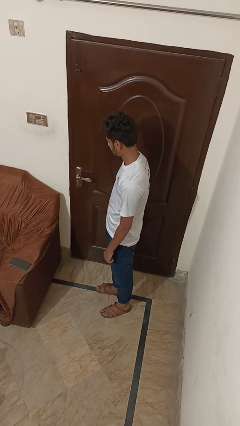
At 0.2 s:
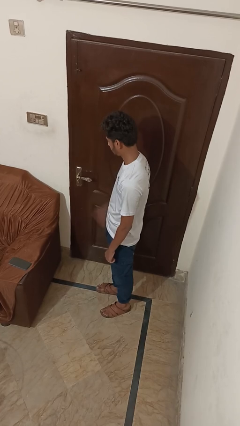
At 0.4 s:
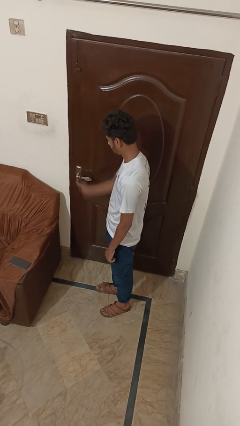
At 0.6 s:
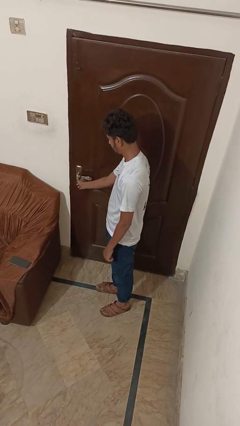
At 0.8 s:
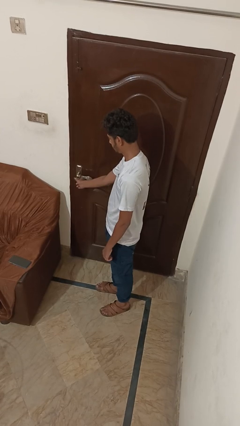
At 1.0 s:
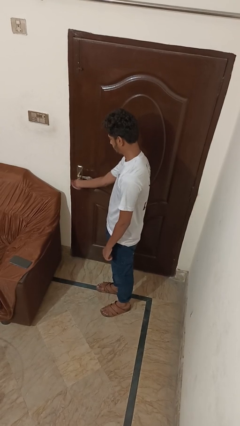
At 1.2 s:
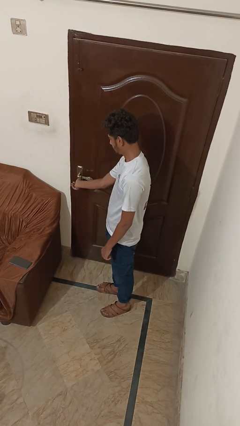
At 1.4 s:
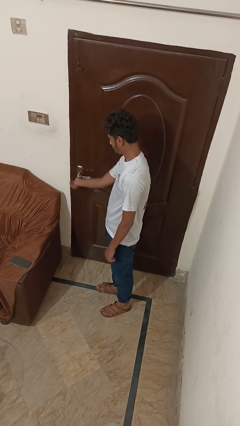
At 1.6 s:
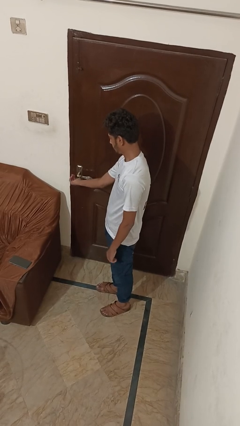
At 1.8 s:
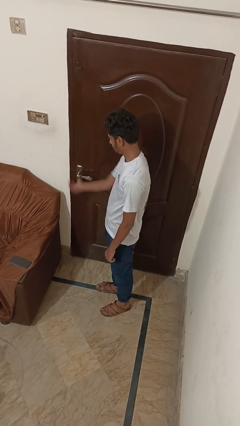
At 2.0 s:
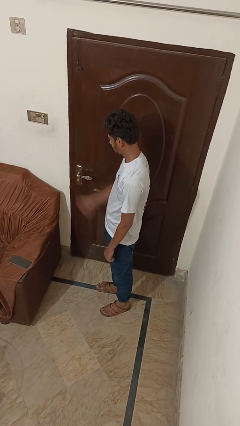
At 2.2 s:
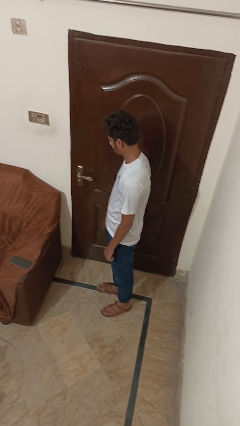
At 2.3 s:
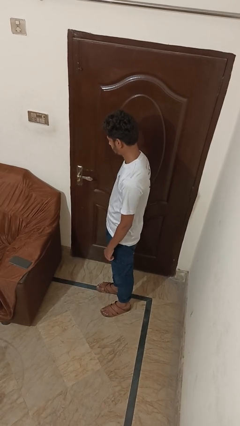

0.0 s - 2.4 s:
person unlocks door with keys

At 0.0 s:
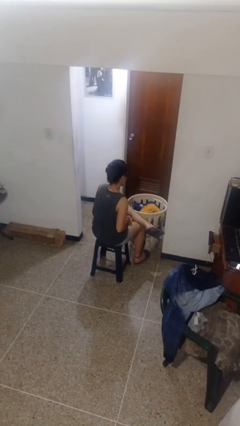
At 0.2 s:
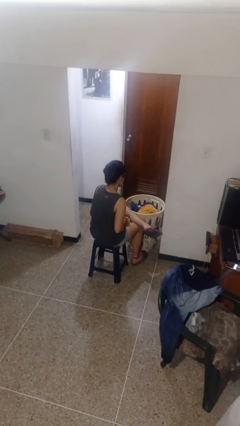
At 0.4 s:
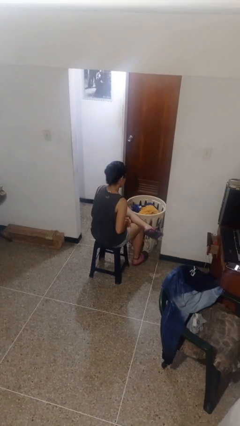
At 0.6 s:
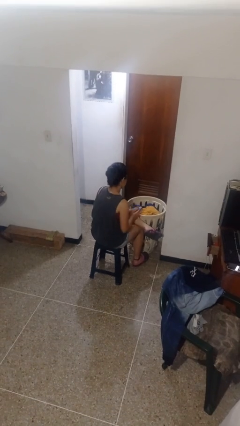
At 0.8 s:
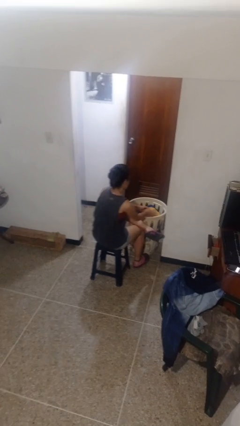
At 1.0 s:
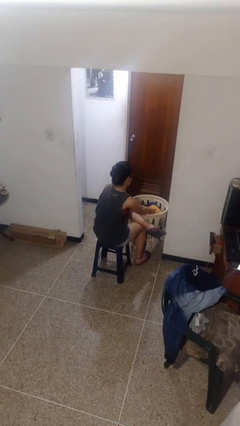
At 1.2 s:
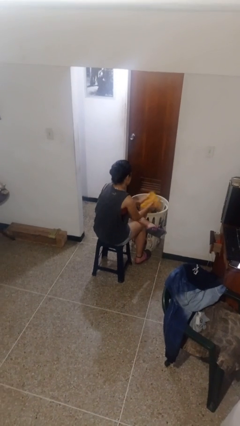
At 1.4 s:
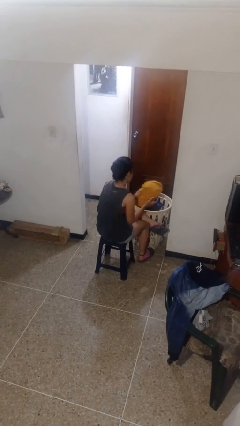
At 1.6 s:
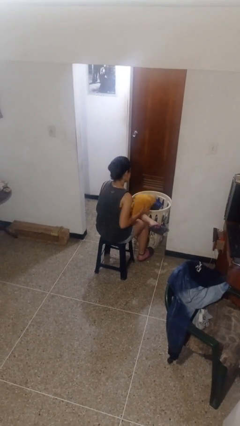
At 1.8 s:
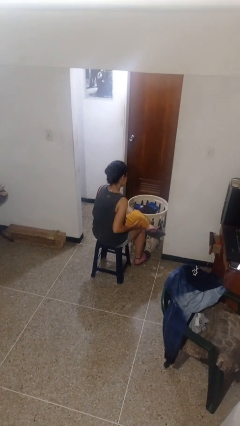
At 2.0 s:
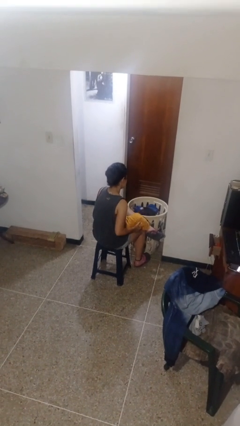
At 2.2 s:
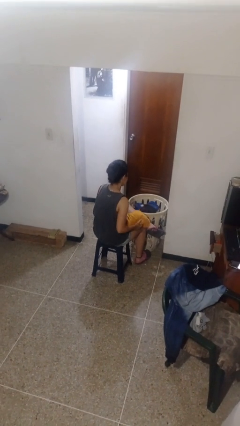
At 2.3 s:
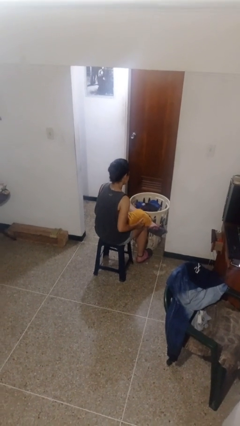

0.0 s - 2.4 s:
person takes object from basket

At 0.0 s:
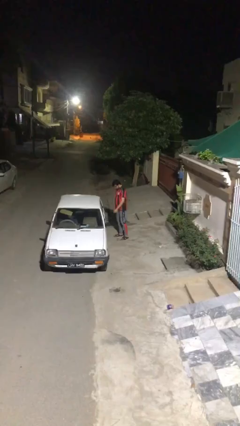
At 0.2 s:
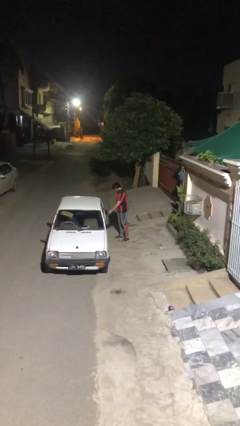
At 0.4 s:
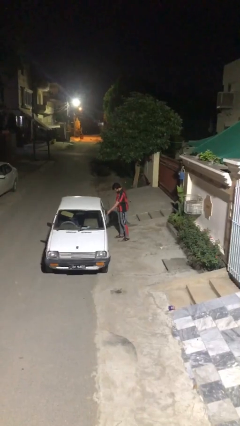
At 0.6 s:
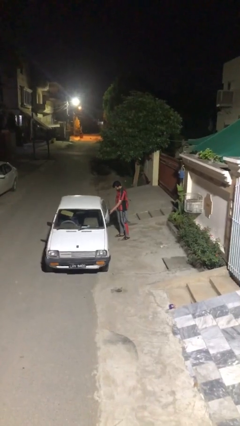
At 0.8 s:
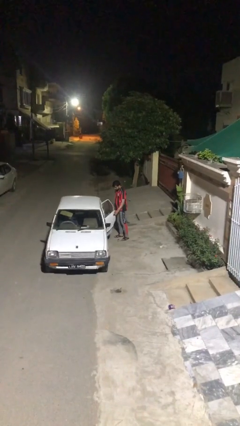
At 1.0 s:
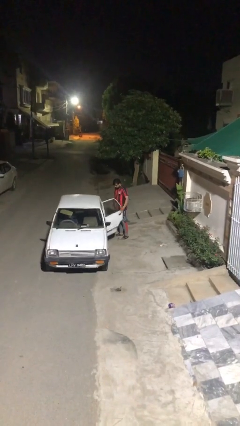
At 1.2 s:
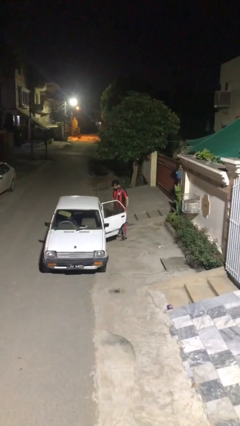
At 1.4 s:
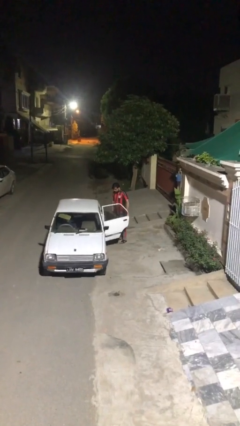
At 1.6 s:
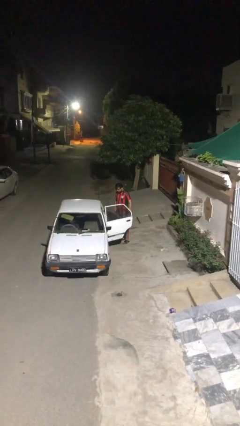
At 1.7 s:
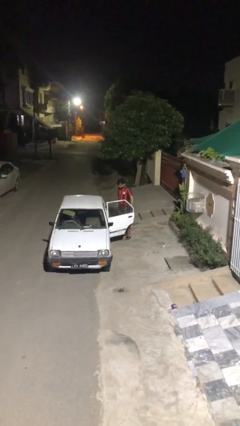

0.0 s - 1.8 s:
person opens car door

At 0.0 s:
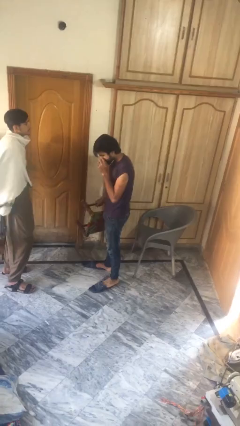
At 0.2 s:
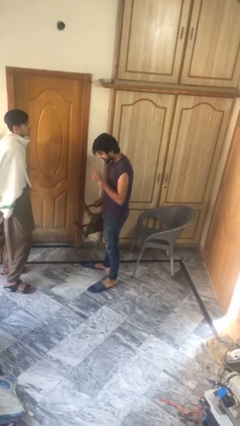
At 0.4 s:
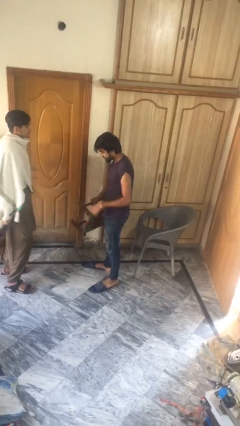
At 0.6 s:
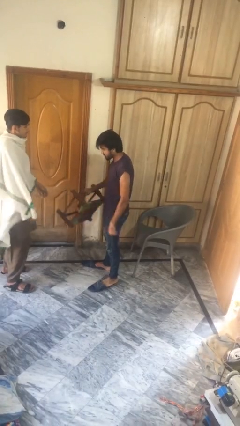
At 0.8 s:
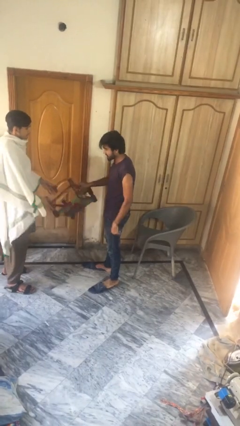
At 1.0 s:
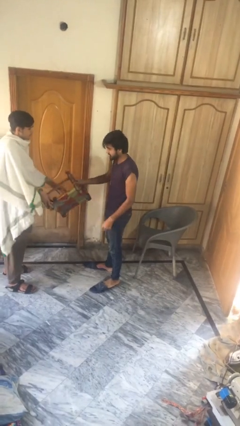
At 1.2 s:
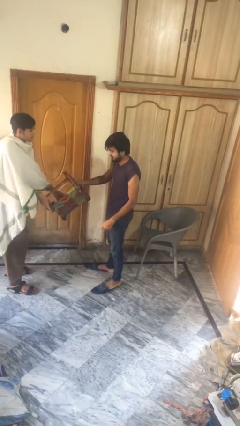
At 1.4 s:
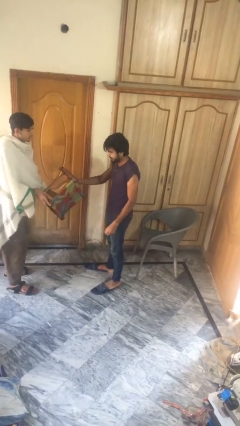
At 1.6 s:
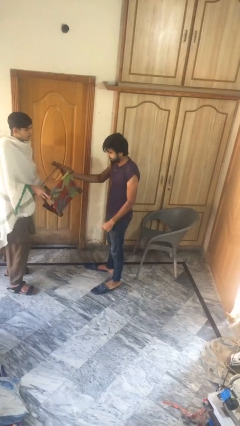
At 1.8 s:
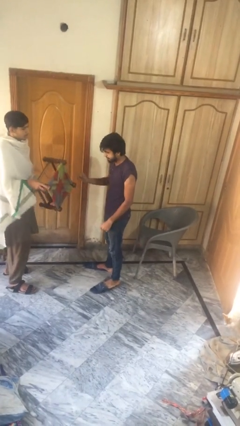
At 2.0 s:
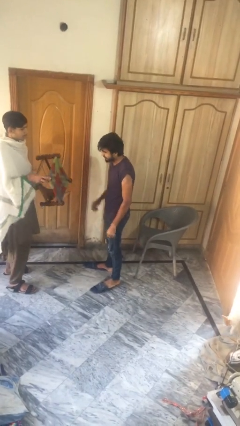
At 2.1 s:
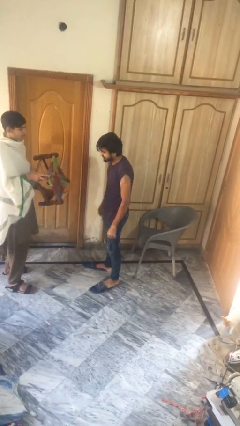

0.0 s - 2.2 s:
person transfers object to person

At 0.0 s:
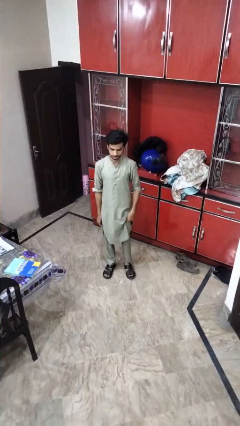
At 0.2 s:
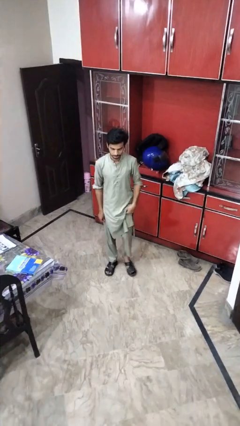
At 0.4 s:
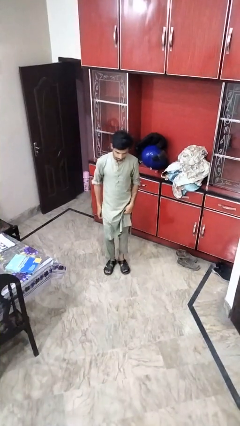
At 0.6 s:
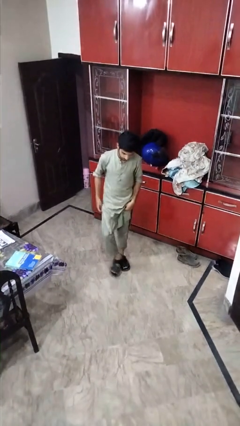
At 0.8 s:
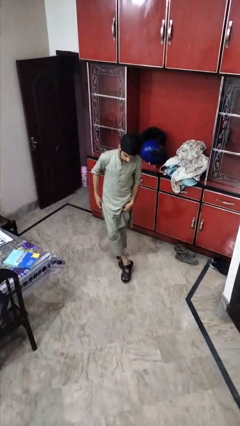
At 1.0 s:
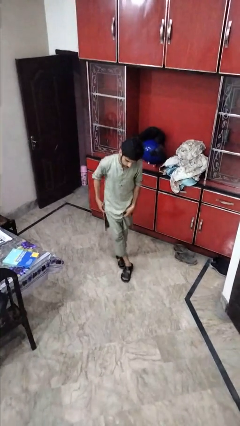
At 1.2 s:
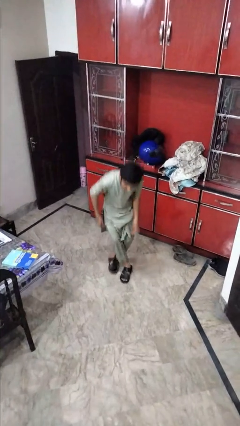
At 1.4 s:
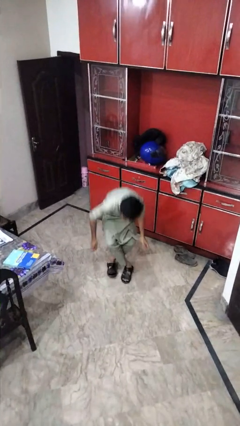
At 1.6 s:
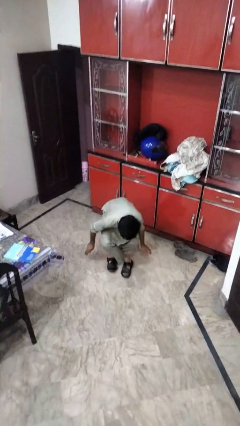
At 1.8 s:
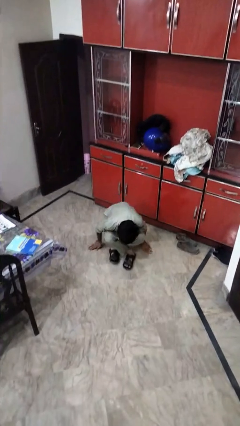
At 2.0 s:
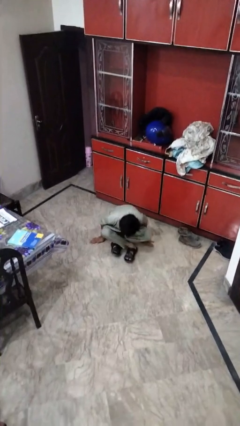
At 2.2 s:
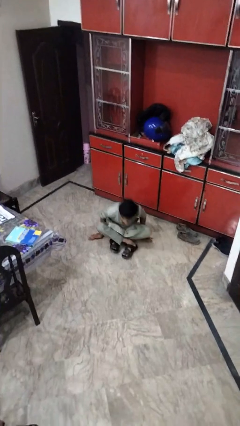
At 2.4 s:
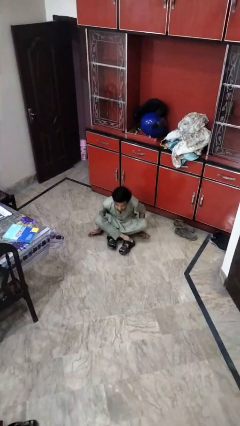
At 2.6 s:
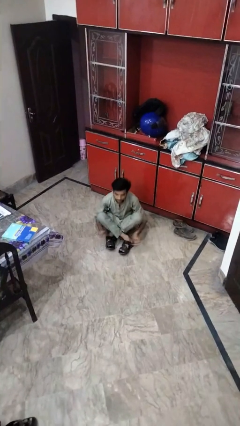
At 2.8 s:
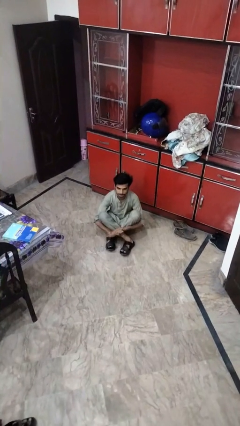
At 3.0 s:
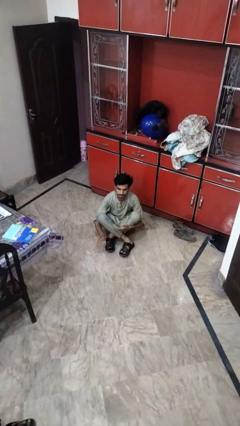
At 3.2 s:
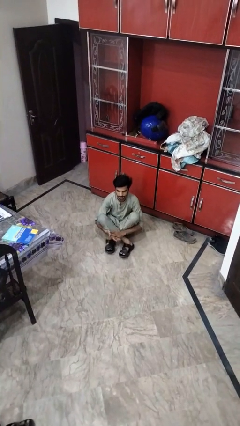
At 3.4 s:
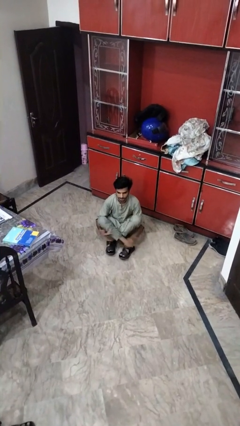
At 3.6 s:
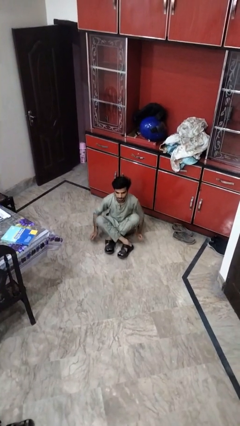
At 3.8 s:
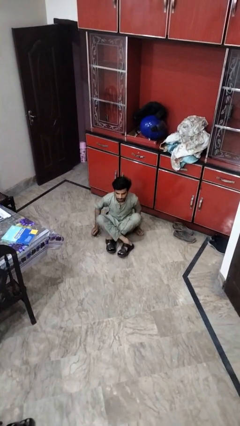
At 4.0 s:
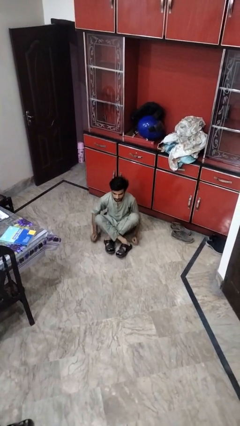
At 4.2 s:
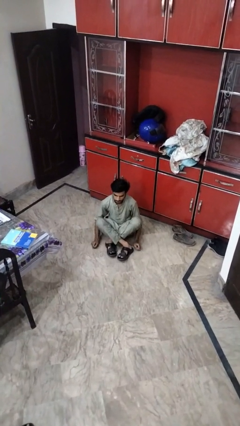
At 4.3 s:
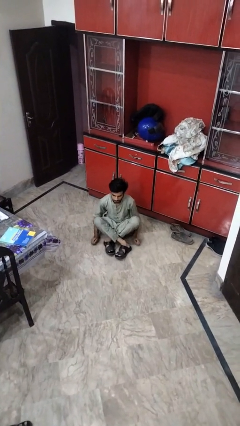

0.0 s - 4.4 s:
person sits crisscross

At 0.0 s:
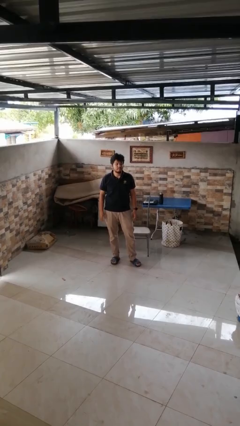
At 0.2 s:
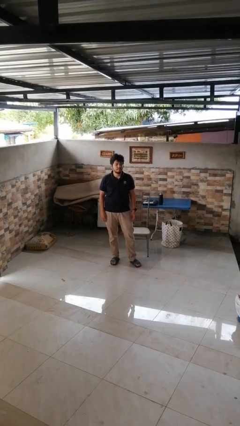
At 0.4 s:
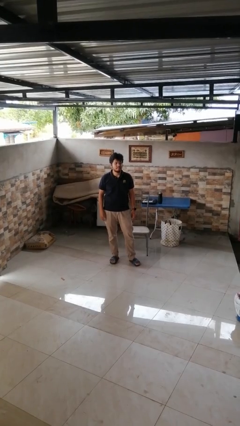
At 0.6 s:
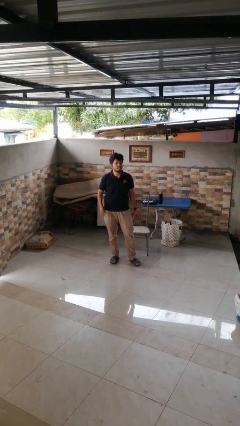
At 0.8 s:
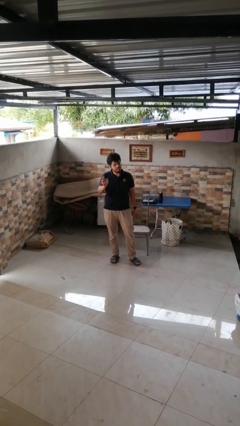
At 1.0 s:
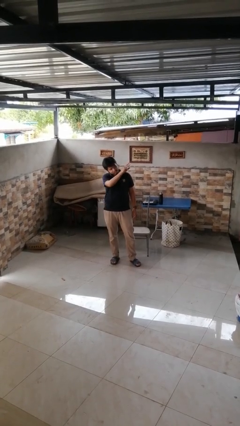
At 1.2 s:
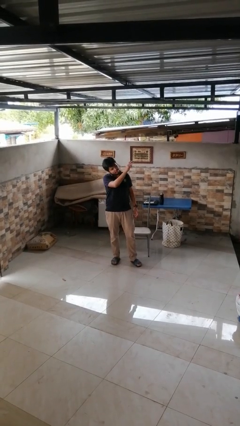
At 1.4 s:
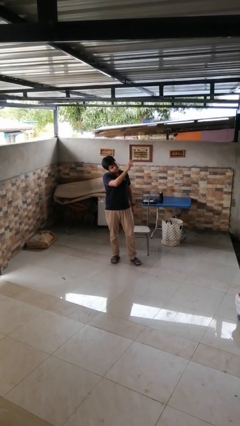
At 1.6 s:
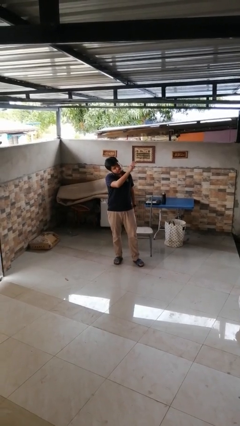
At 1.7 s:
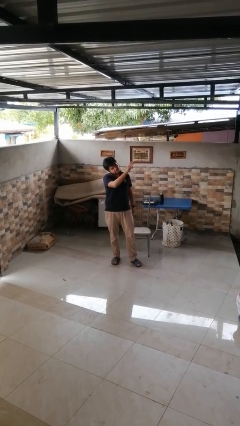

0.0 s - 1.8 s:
person gestures swipe left

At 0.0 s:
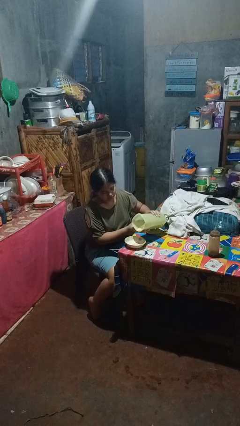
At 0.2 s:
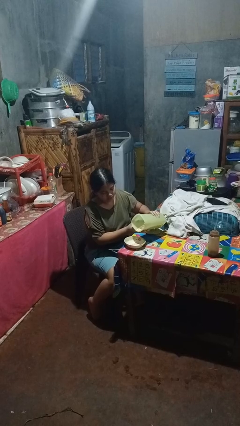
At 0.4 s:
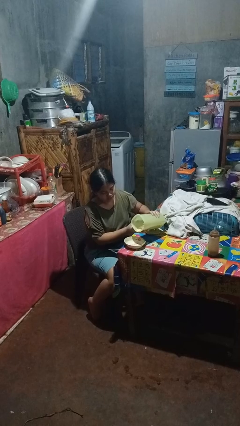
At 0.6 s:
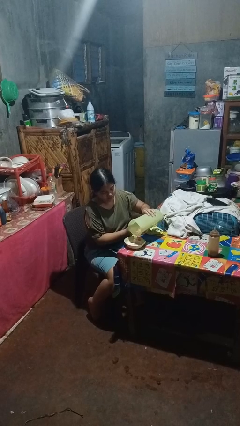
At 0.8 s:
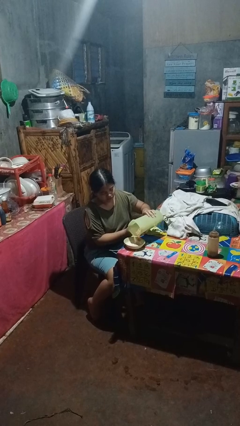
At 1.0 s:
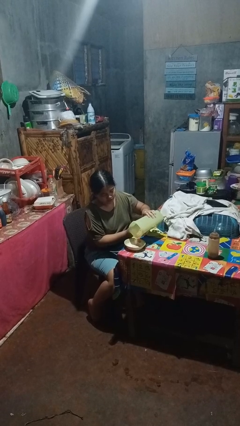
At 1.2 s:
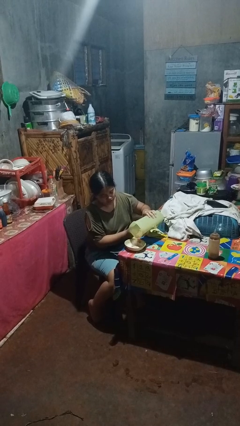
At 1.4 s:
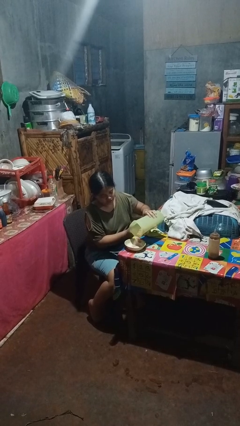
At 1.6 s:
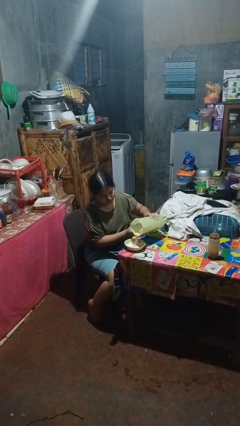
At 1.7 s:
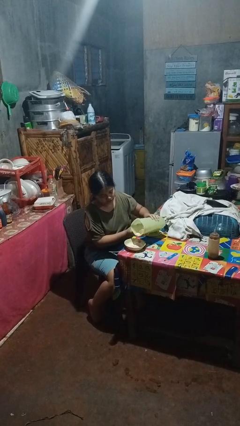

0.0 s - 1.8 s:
person pours into bowl

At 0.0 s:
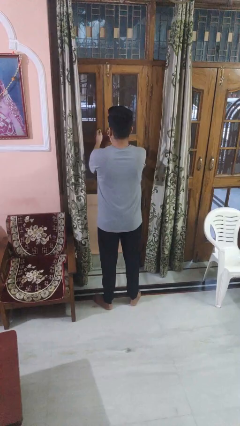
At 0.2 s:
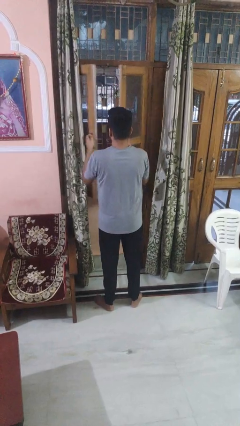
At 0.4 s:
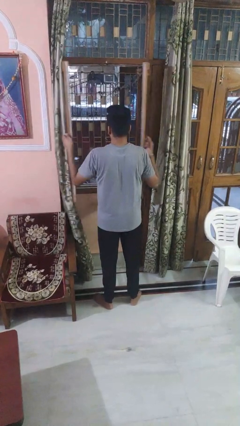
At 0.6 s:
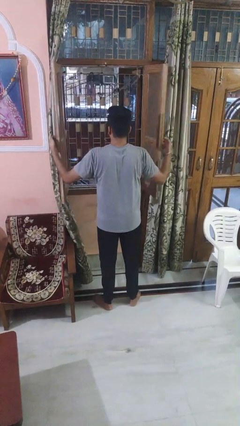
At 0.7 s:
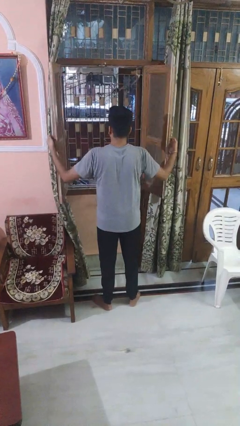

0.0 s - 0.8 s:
person opens home window
